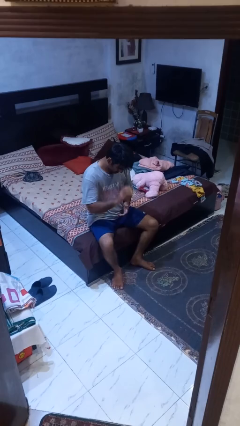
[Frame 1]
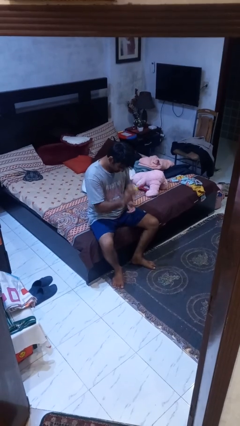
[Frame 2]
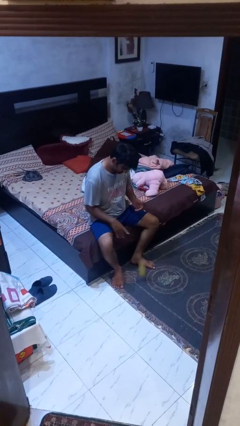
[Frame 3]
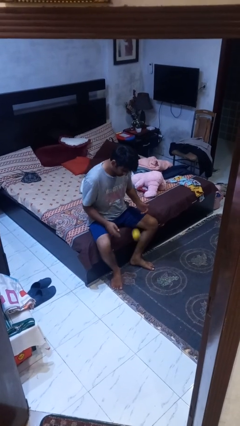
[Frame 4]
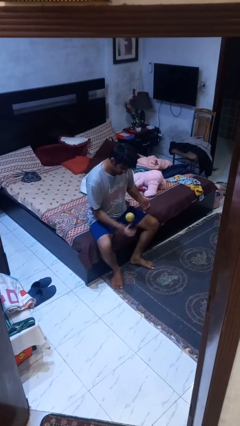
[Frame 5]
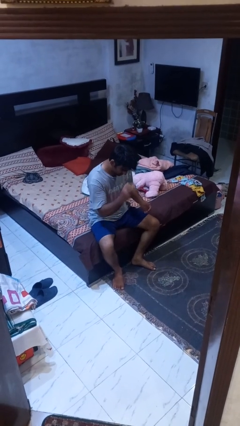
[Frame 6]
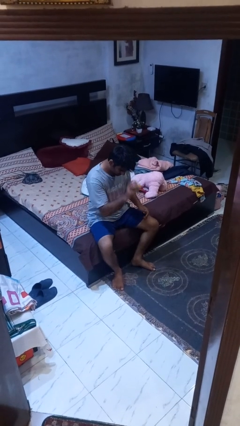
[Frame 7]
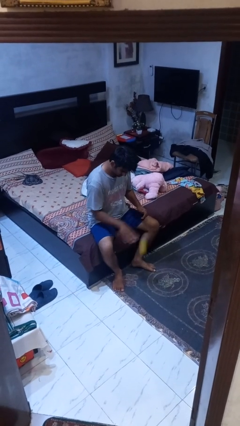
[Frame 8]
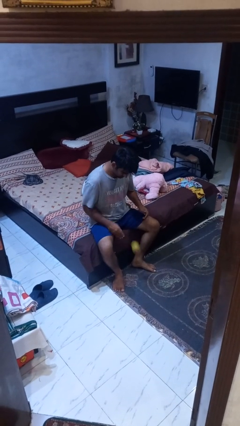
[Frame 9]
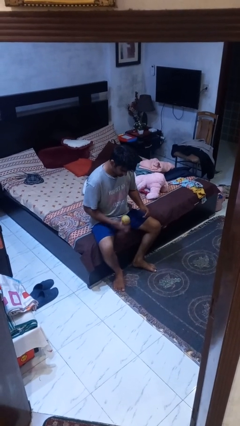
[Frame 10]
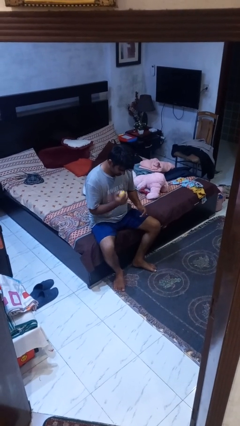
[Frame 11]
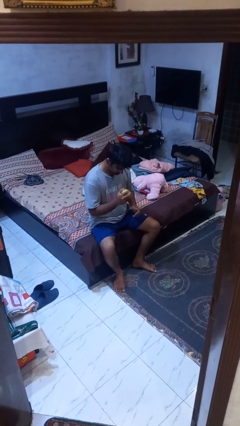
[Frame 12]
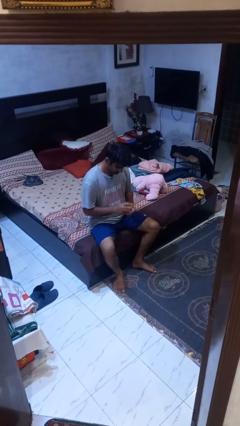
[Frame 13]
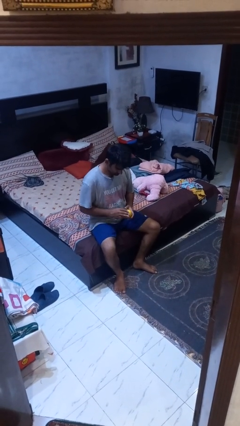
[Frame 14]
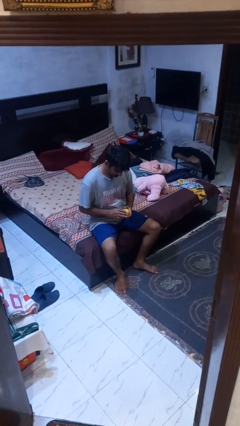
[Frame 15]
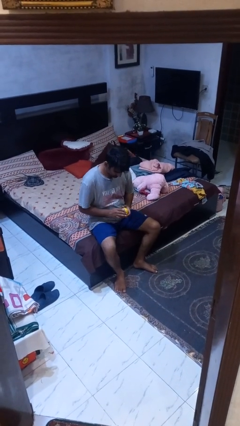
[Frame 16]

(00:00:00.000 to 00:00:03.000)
person bounces ball on floor

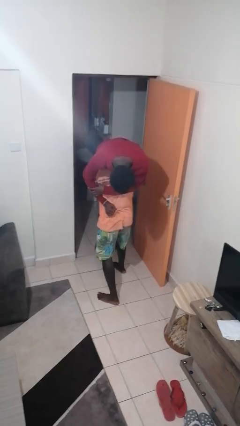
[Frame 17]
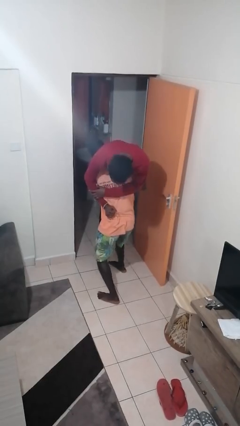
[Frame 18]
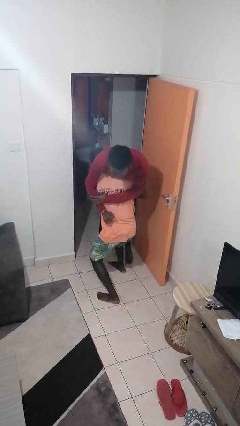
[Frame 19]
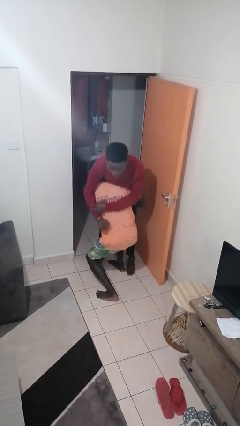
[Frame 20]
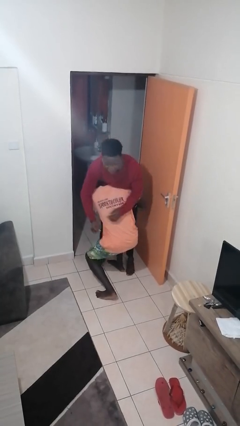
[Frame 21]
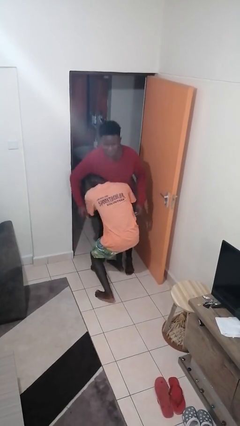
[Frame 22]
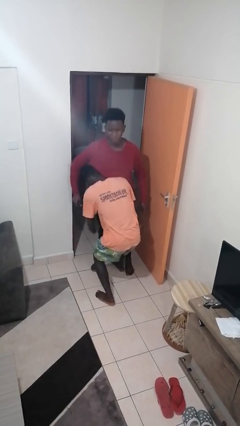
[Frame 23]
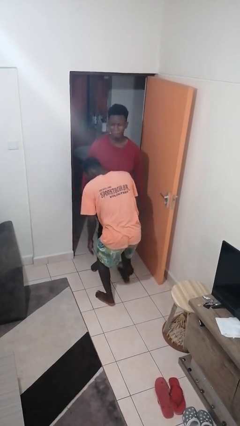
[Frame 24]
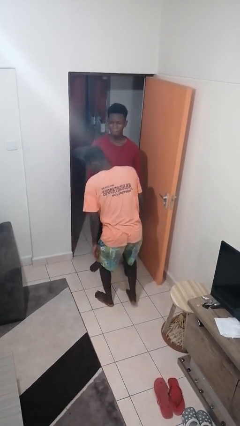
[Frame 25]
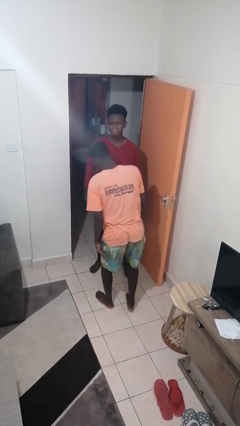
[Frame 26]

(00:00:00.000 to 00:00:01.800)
person puts down person

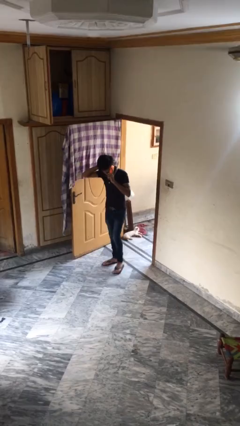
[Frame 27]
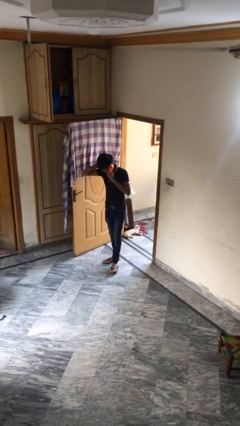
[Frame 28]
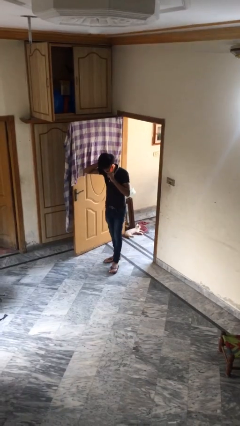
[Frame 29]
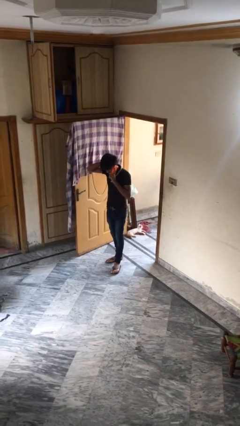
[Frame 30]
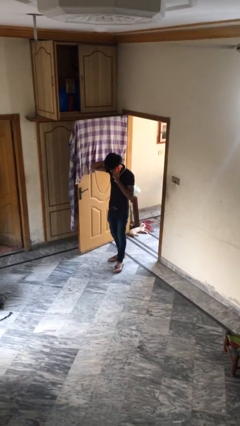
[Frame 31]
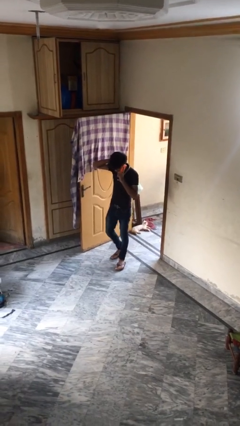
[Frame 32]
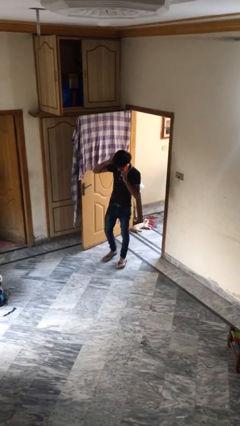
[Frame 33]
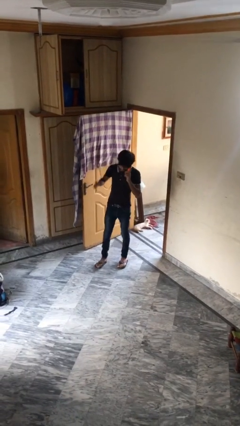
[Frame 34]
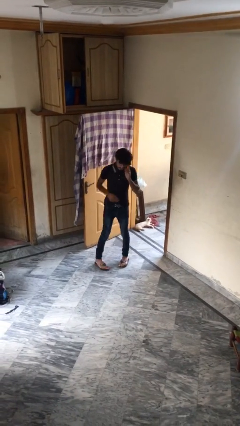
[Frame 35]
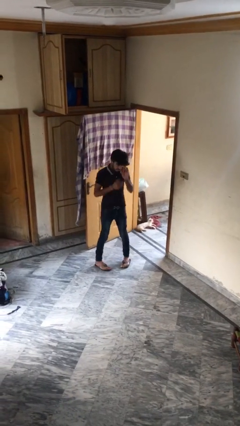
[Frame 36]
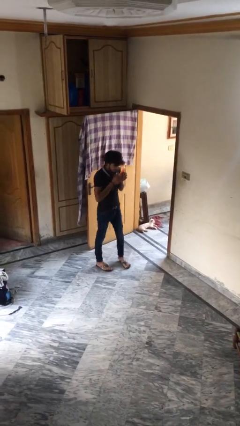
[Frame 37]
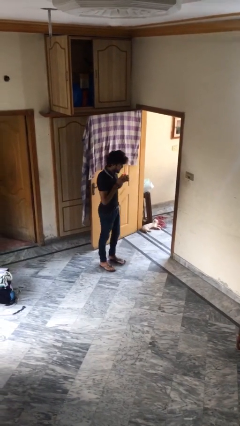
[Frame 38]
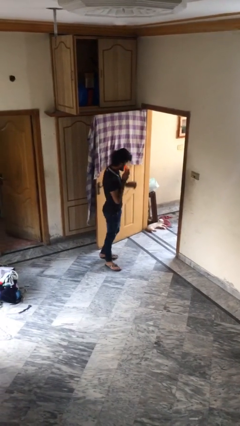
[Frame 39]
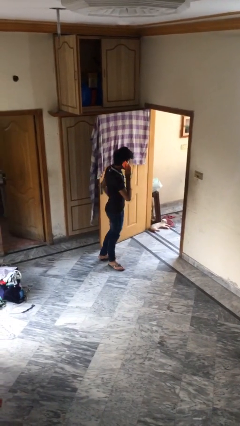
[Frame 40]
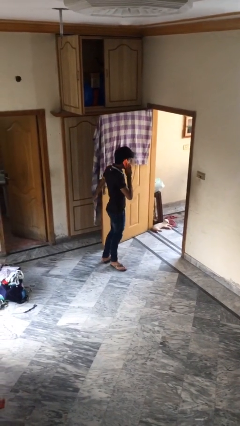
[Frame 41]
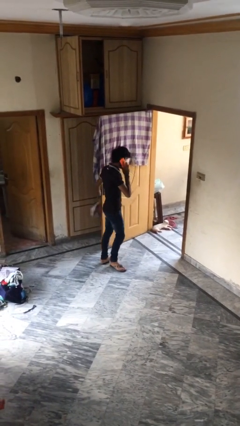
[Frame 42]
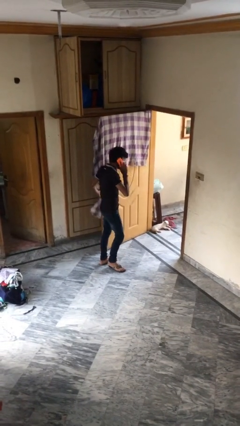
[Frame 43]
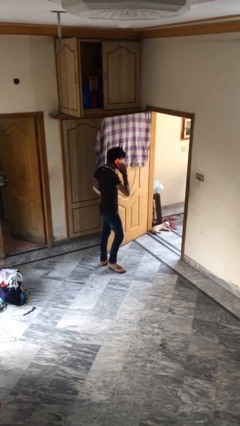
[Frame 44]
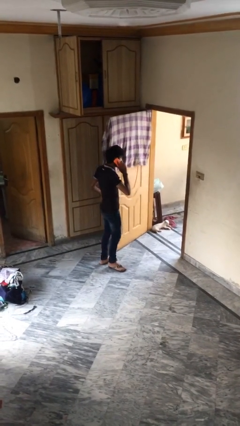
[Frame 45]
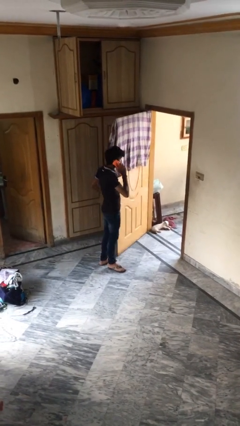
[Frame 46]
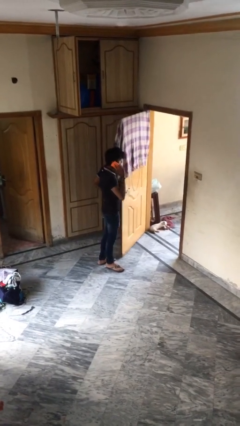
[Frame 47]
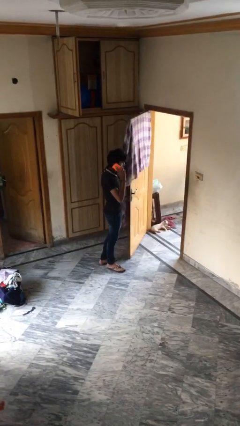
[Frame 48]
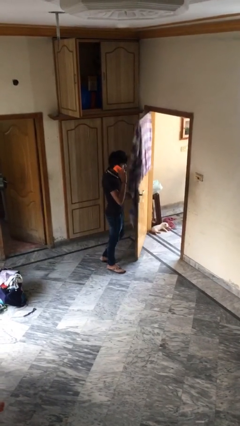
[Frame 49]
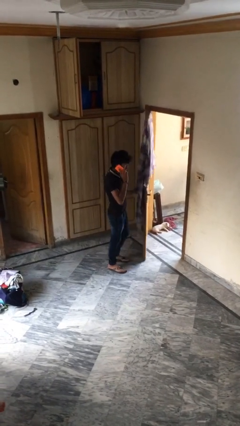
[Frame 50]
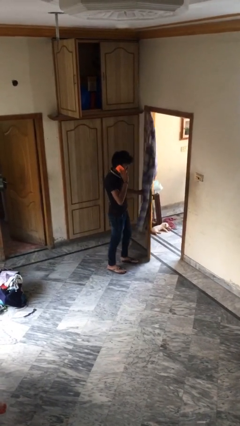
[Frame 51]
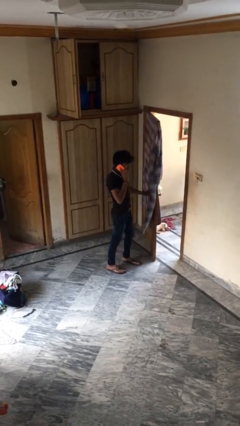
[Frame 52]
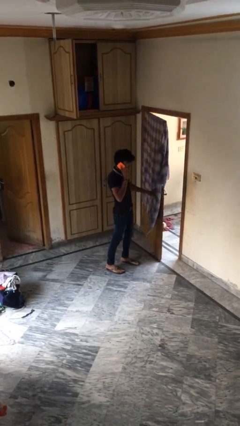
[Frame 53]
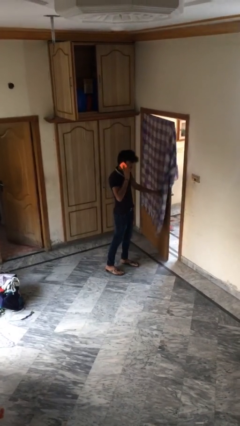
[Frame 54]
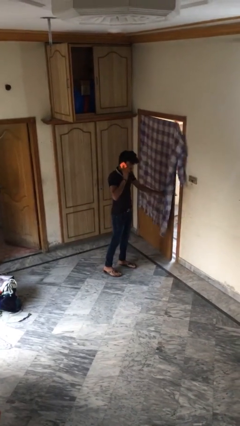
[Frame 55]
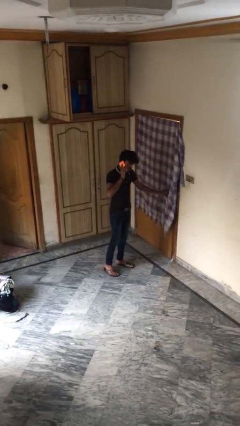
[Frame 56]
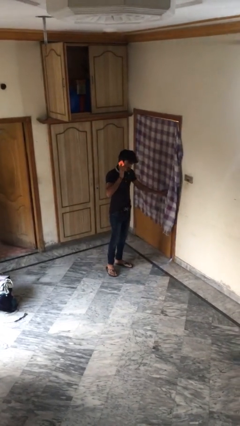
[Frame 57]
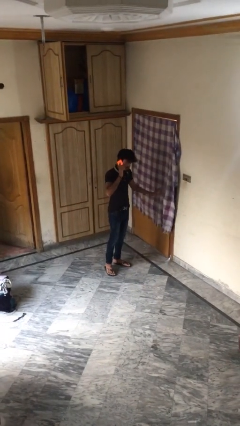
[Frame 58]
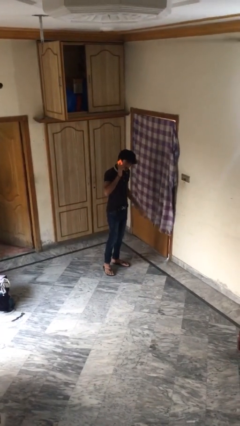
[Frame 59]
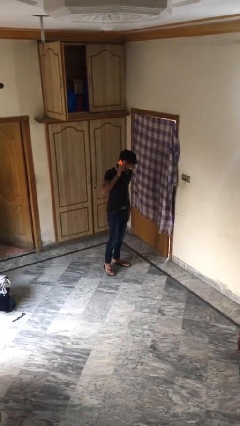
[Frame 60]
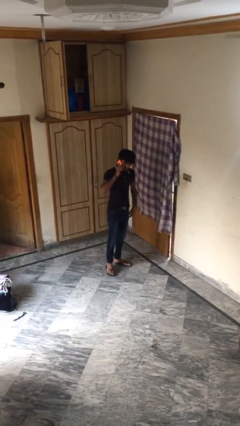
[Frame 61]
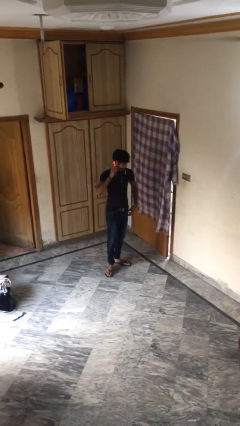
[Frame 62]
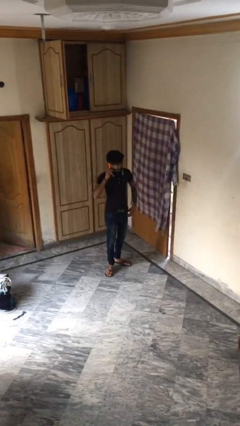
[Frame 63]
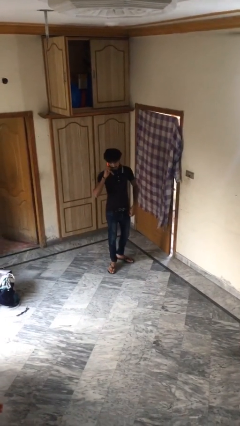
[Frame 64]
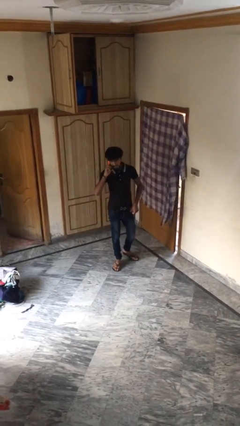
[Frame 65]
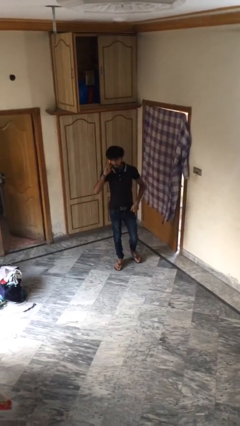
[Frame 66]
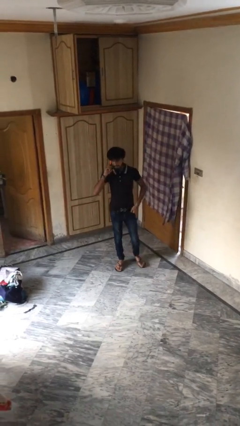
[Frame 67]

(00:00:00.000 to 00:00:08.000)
person closes facility door

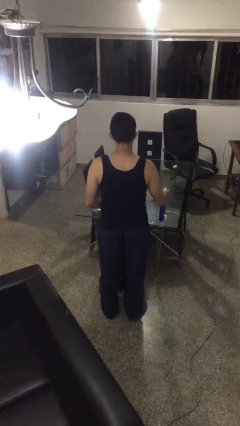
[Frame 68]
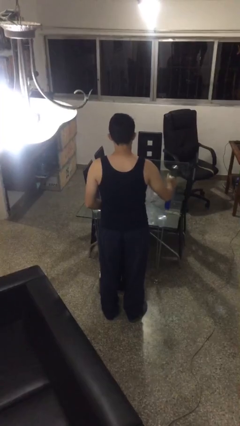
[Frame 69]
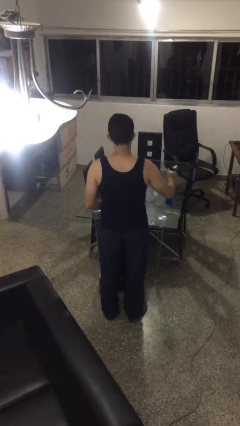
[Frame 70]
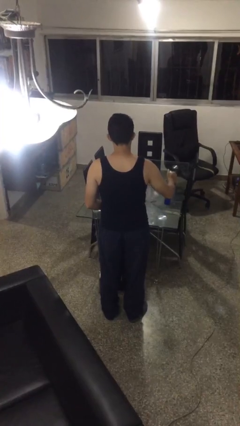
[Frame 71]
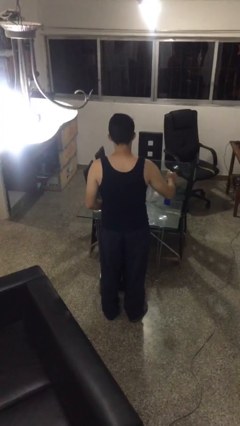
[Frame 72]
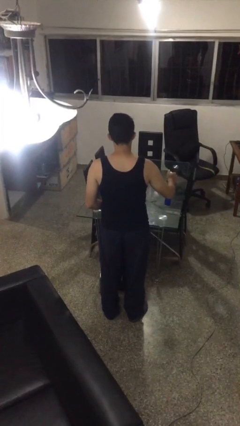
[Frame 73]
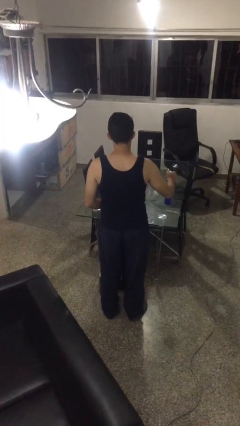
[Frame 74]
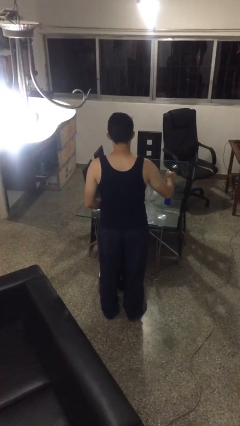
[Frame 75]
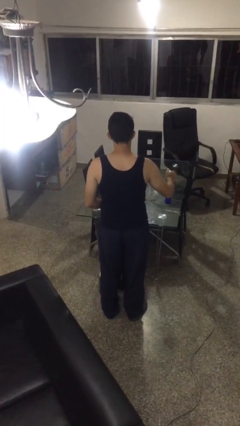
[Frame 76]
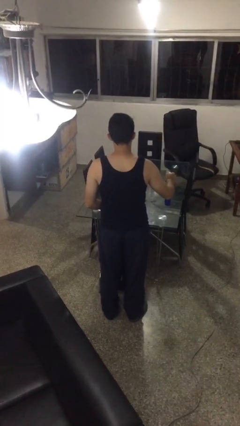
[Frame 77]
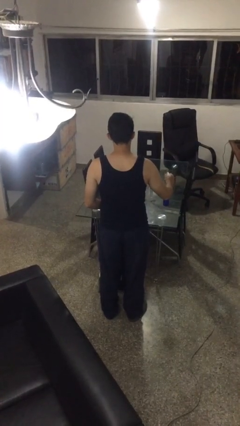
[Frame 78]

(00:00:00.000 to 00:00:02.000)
person sprays from bottle

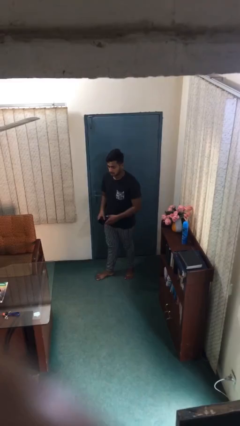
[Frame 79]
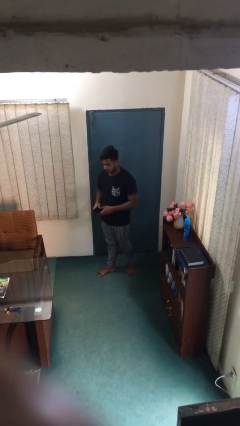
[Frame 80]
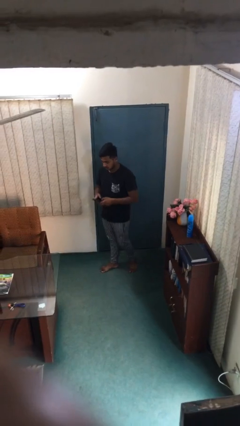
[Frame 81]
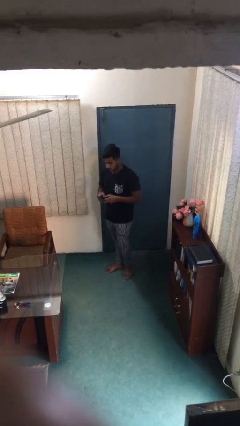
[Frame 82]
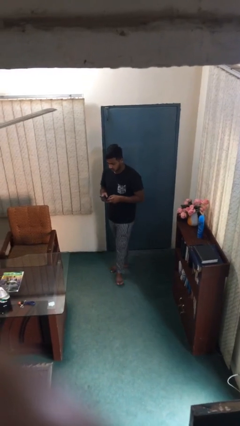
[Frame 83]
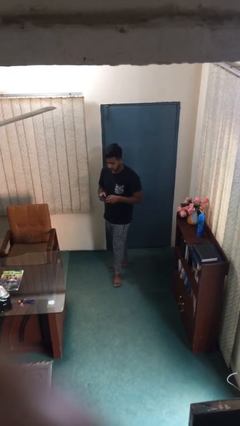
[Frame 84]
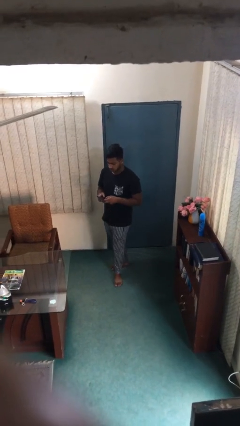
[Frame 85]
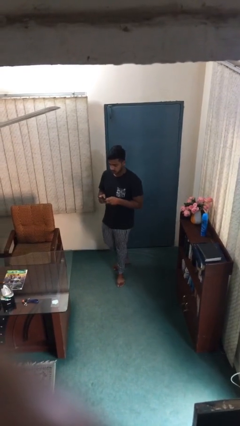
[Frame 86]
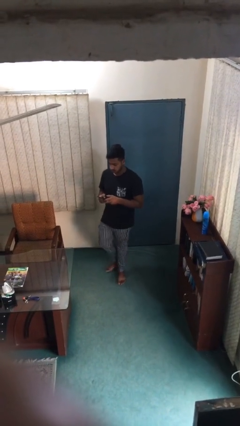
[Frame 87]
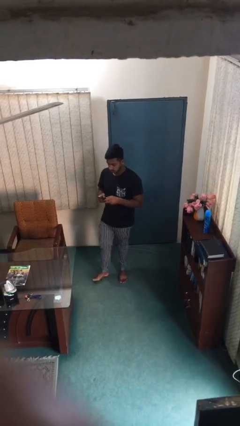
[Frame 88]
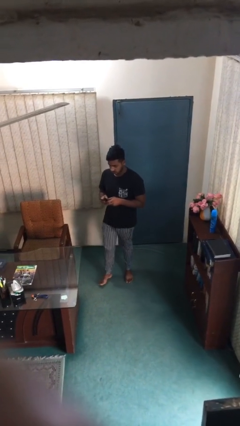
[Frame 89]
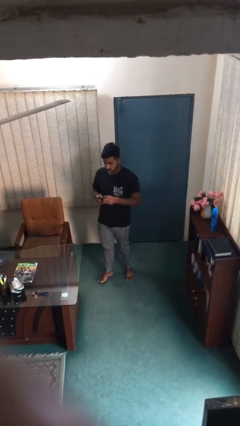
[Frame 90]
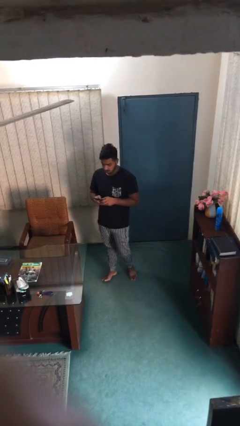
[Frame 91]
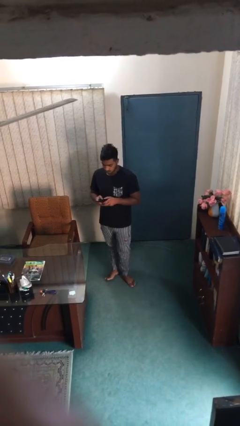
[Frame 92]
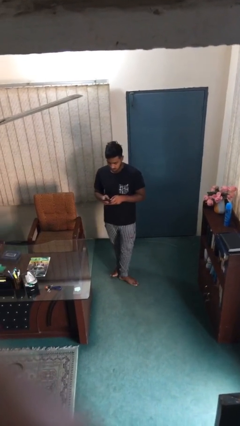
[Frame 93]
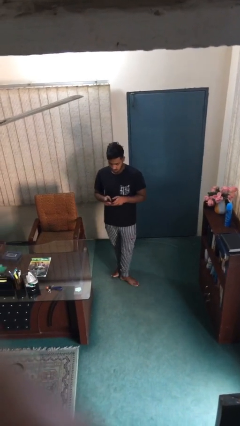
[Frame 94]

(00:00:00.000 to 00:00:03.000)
person texts on phone
